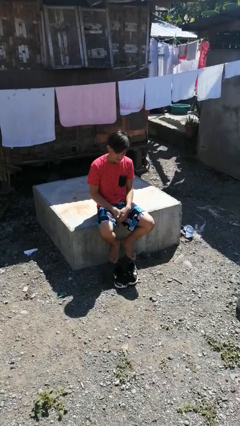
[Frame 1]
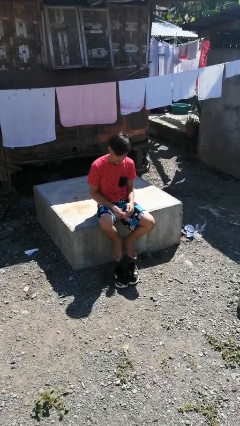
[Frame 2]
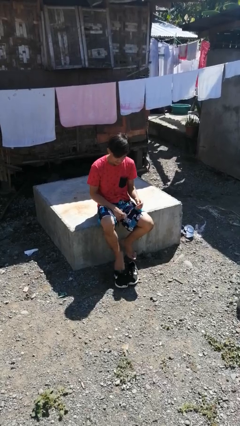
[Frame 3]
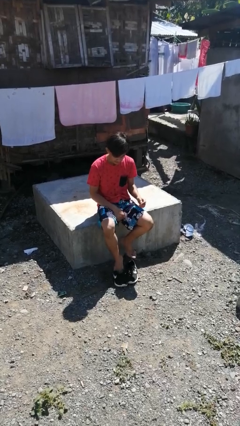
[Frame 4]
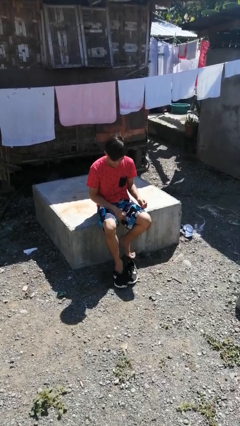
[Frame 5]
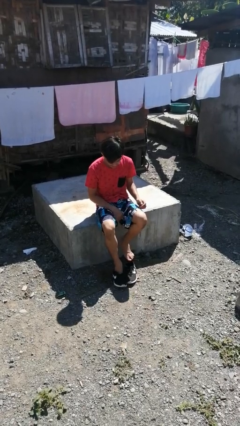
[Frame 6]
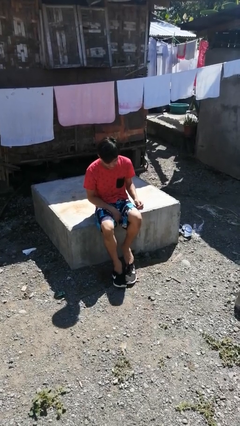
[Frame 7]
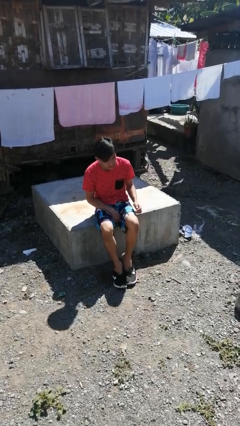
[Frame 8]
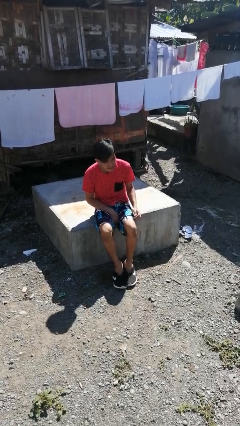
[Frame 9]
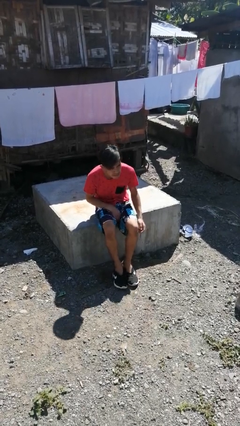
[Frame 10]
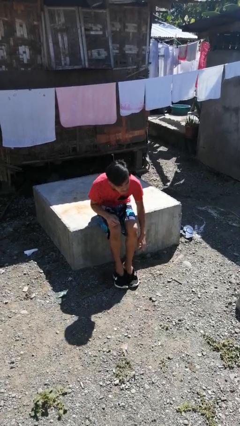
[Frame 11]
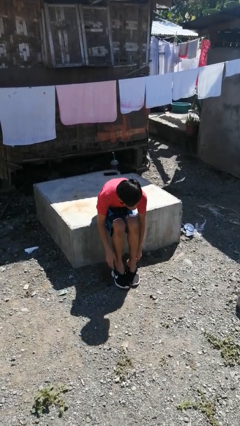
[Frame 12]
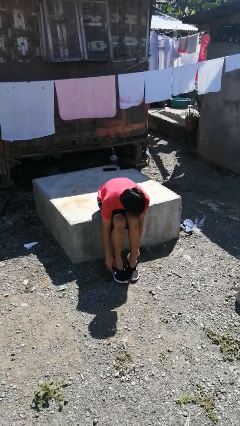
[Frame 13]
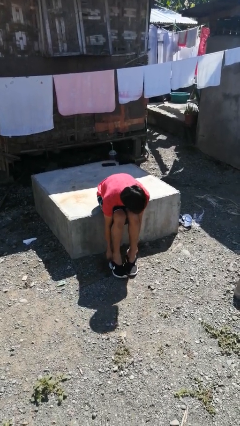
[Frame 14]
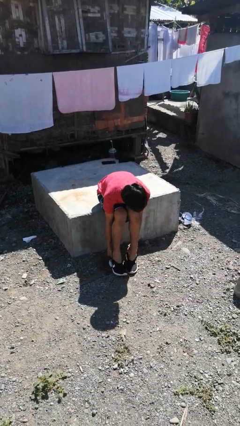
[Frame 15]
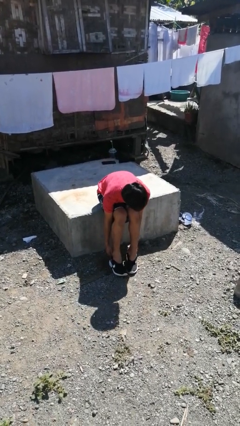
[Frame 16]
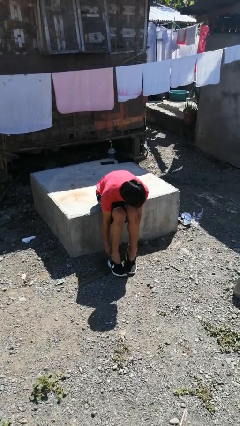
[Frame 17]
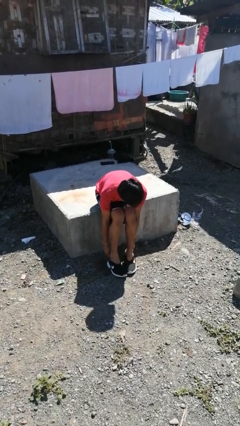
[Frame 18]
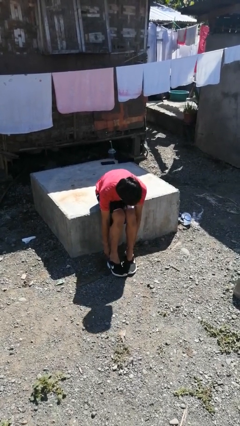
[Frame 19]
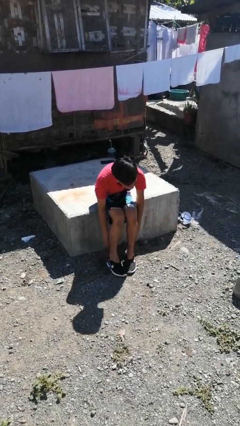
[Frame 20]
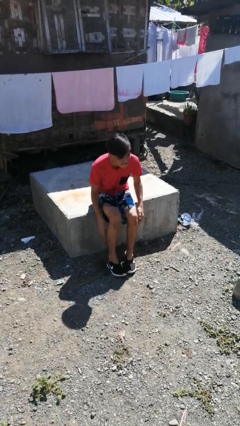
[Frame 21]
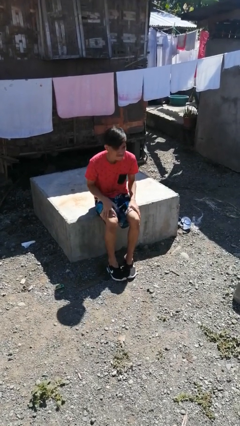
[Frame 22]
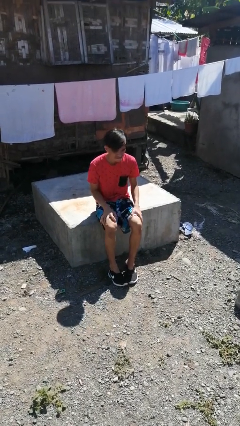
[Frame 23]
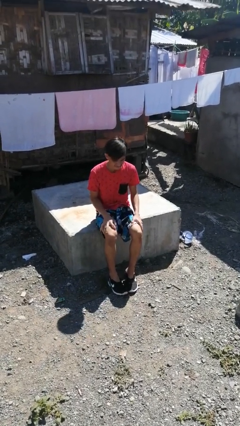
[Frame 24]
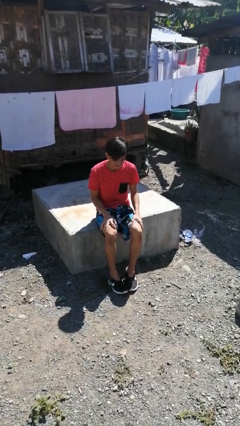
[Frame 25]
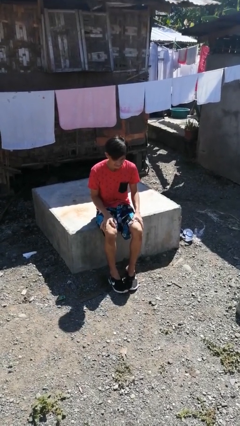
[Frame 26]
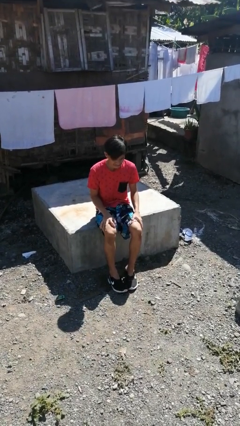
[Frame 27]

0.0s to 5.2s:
person puts on shoes

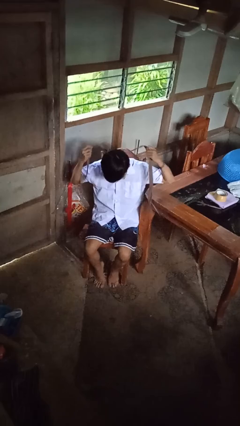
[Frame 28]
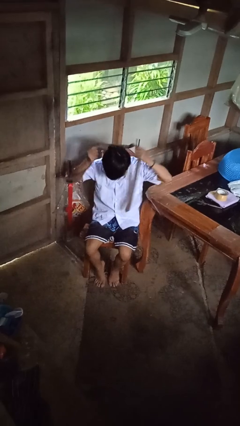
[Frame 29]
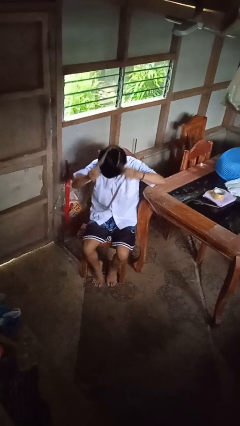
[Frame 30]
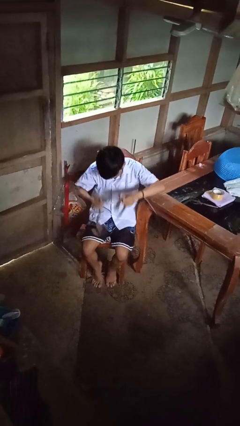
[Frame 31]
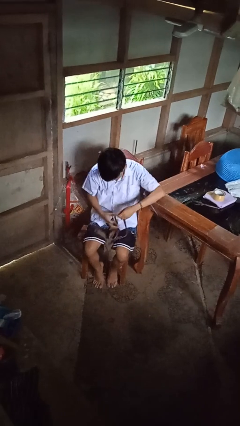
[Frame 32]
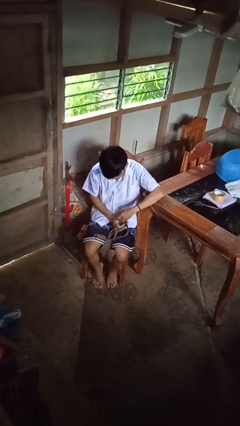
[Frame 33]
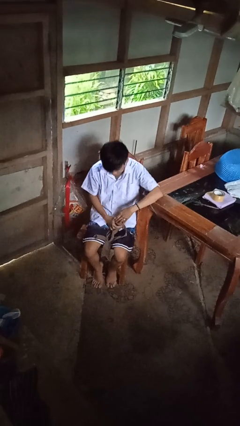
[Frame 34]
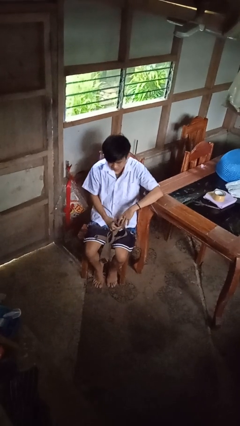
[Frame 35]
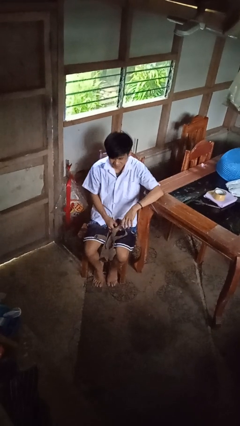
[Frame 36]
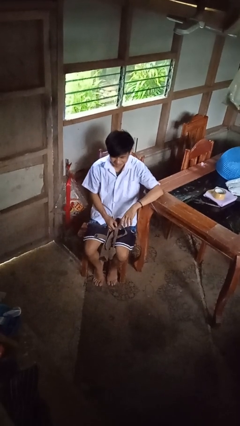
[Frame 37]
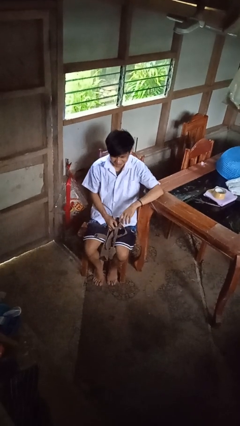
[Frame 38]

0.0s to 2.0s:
person takes off necktie

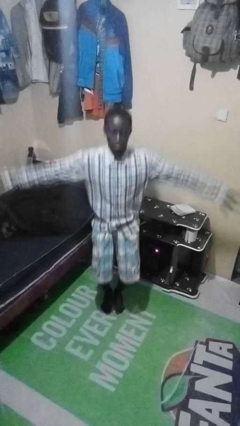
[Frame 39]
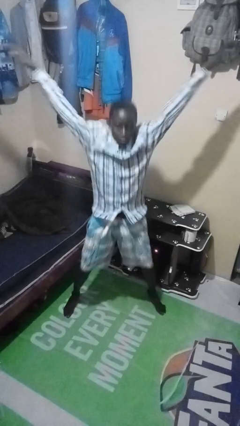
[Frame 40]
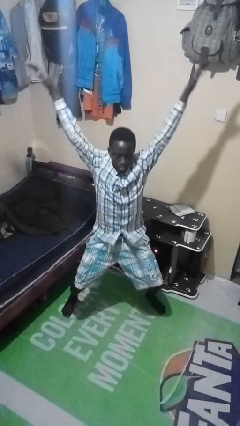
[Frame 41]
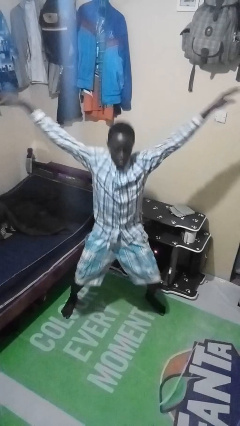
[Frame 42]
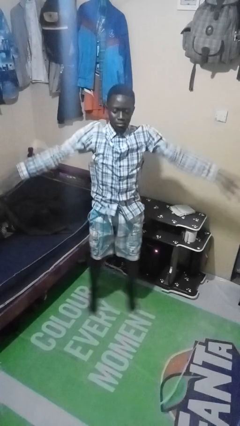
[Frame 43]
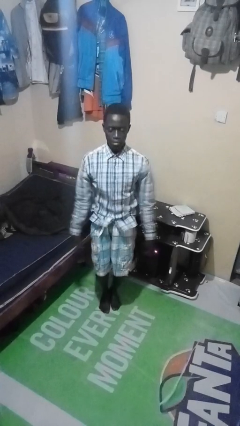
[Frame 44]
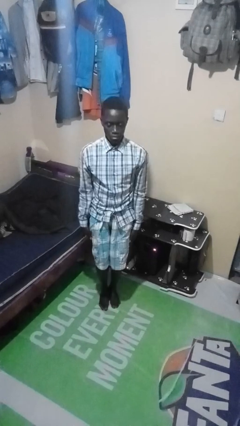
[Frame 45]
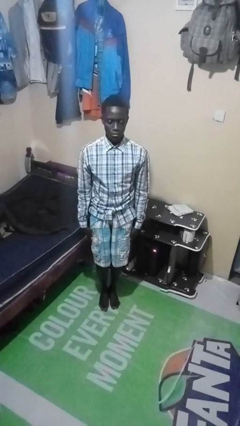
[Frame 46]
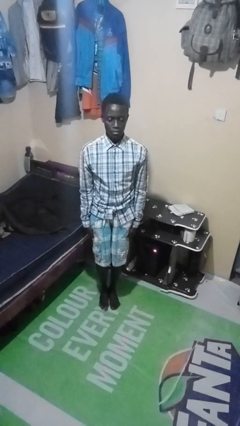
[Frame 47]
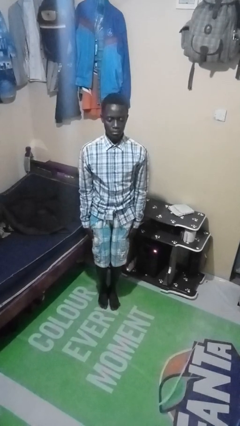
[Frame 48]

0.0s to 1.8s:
person exercises with jumping jacks

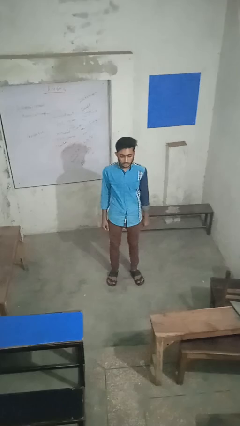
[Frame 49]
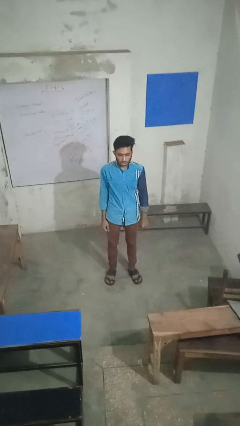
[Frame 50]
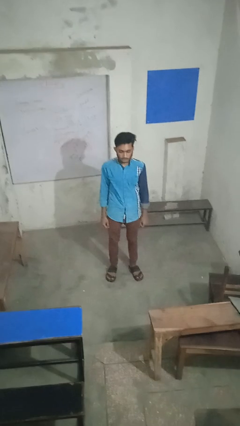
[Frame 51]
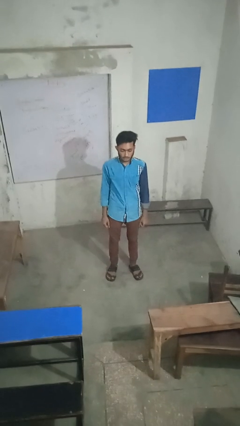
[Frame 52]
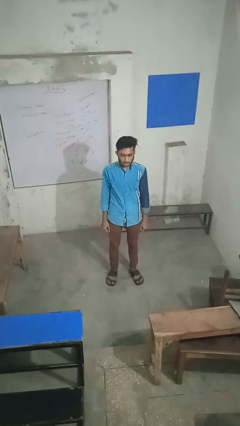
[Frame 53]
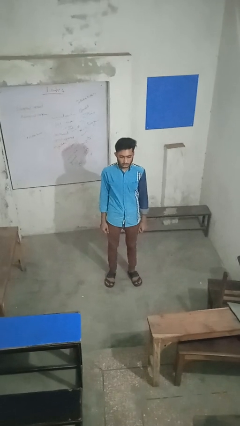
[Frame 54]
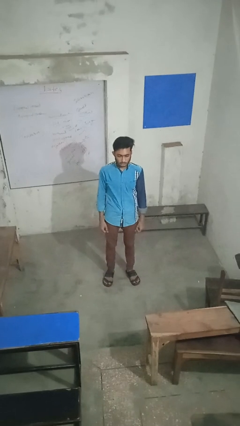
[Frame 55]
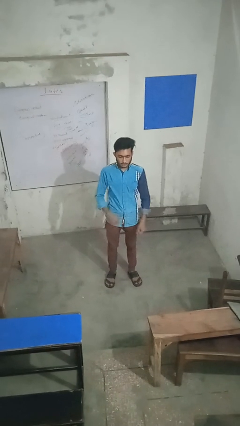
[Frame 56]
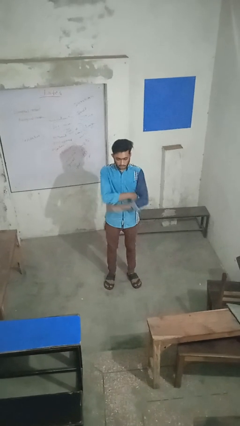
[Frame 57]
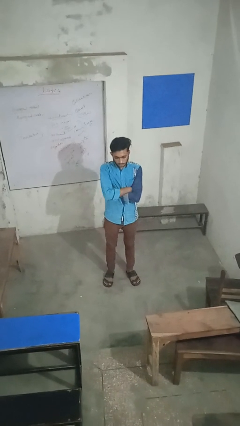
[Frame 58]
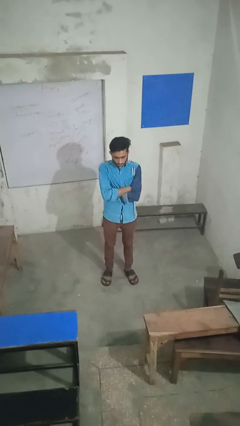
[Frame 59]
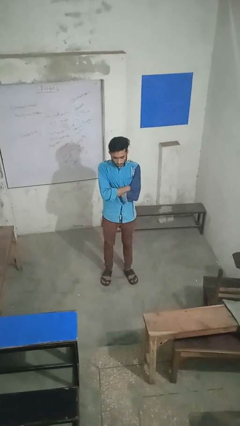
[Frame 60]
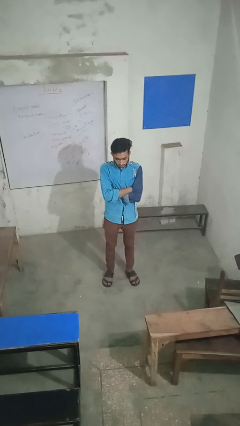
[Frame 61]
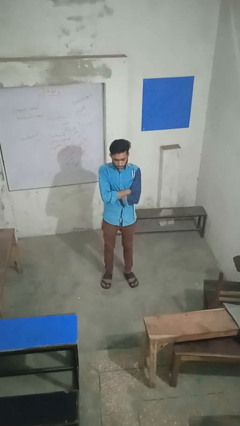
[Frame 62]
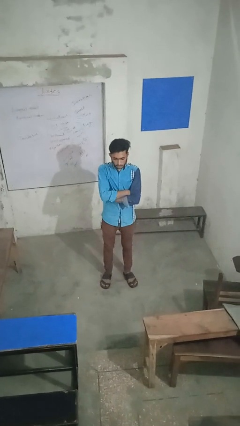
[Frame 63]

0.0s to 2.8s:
person crosses arms

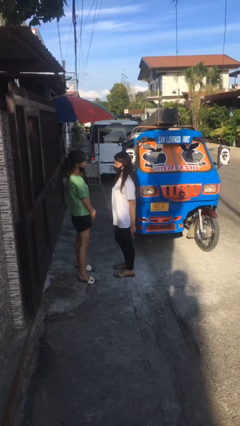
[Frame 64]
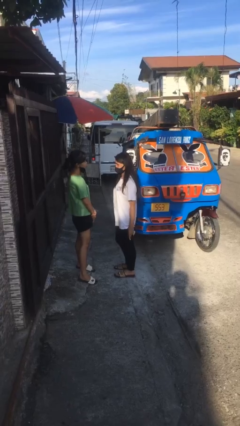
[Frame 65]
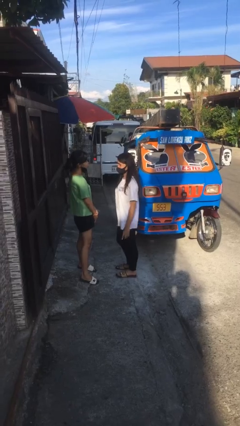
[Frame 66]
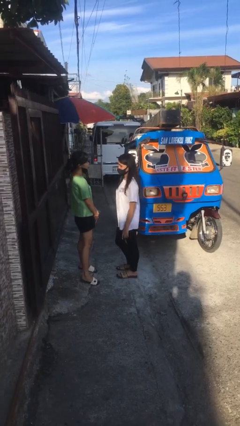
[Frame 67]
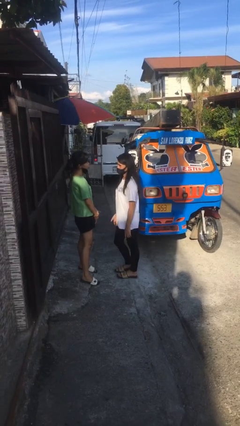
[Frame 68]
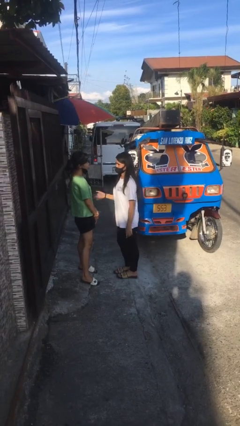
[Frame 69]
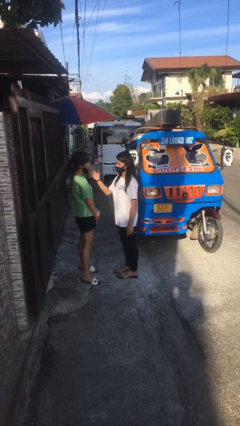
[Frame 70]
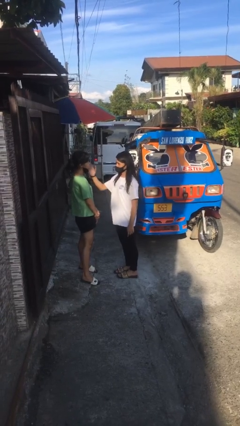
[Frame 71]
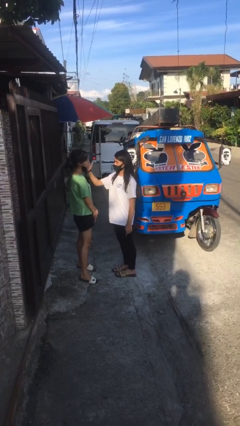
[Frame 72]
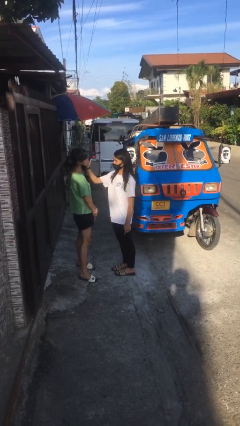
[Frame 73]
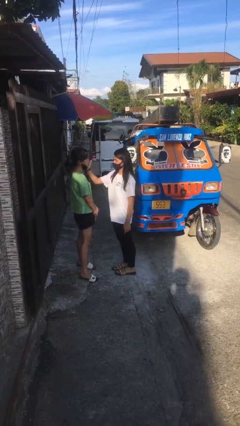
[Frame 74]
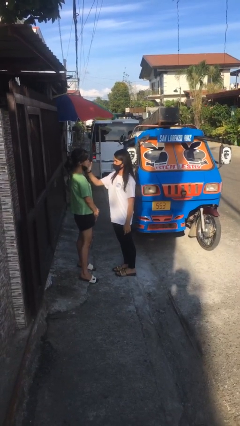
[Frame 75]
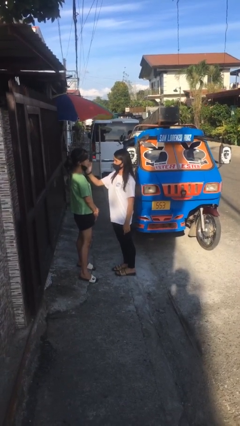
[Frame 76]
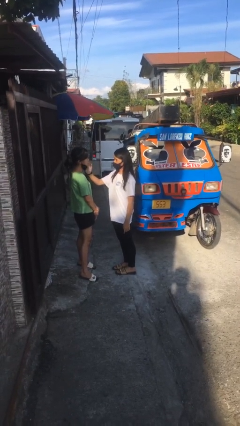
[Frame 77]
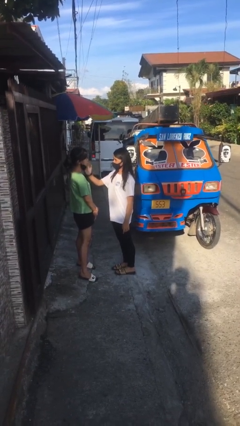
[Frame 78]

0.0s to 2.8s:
person touches face of person

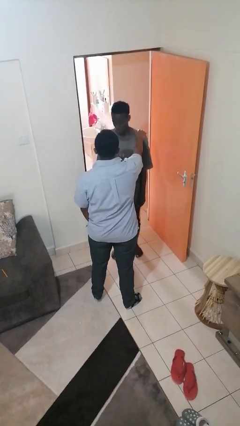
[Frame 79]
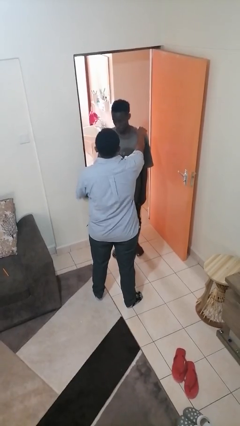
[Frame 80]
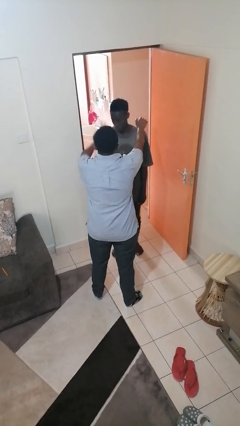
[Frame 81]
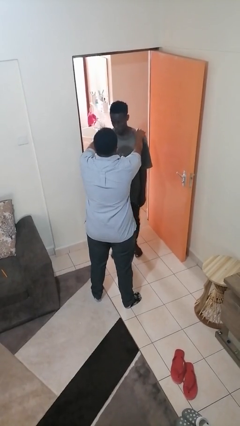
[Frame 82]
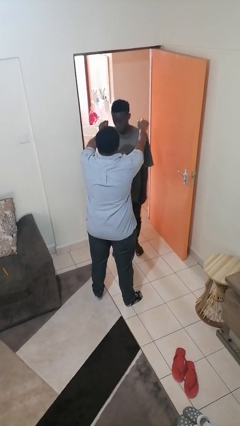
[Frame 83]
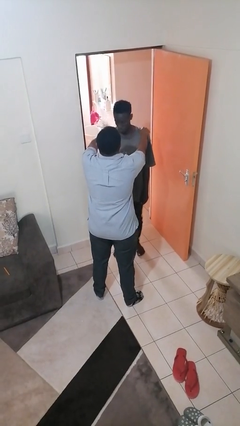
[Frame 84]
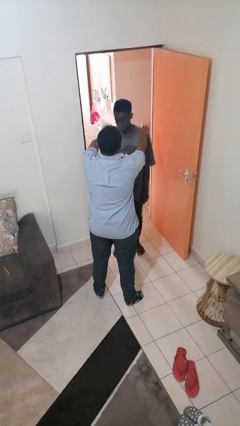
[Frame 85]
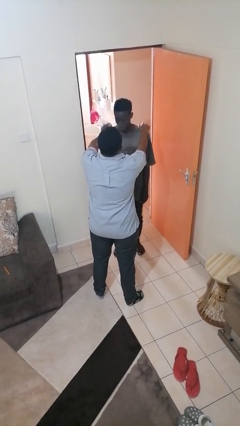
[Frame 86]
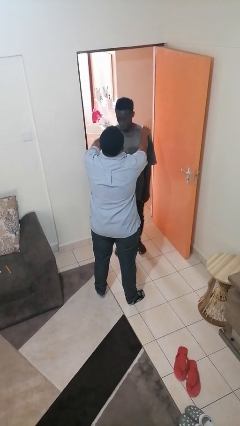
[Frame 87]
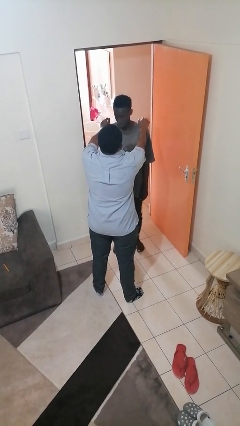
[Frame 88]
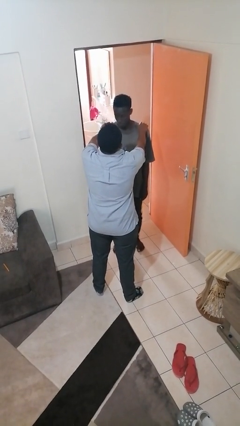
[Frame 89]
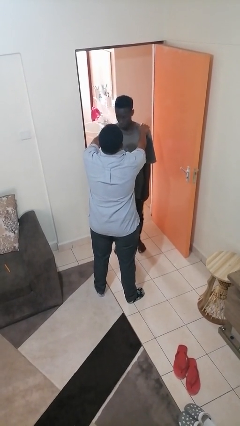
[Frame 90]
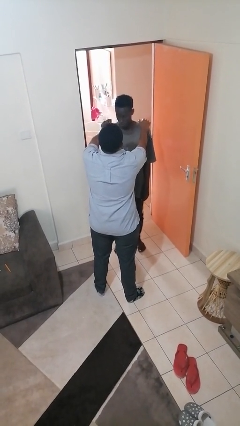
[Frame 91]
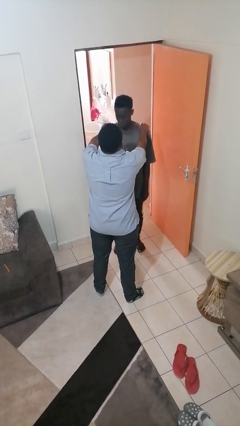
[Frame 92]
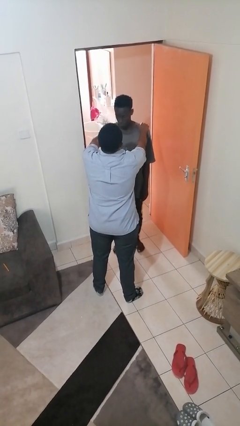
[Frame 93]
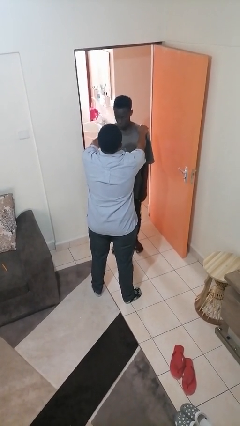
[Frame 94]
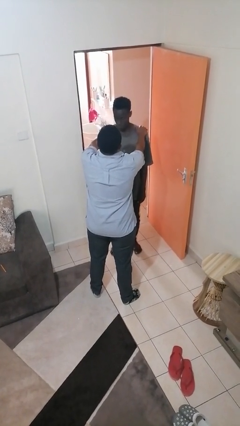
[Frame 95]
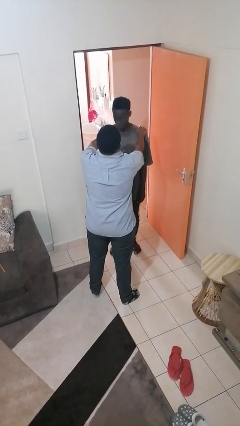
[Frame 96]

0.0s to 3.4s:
person pounds shoulders of person
